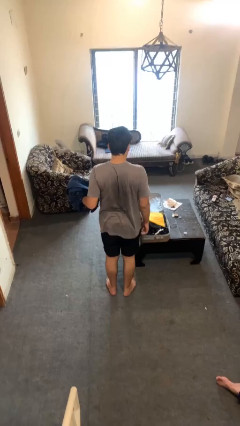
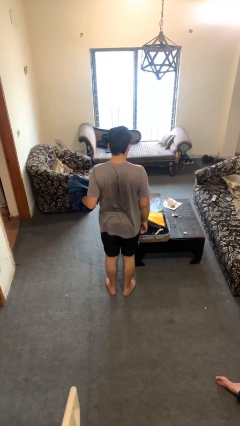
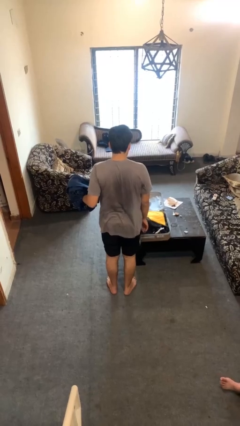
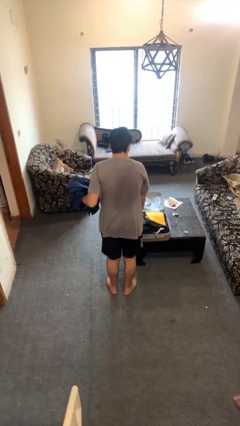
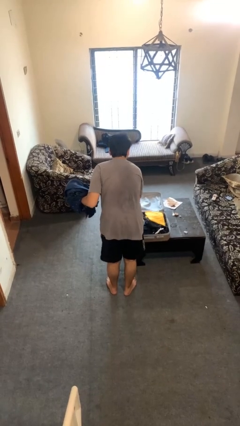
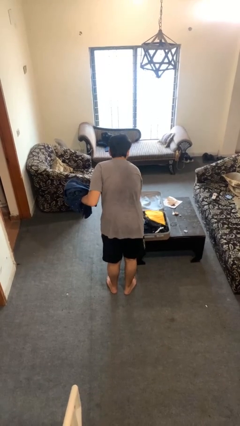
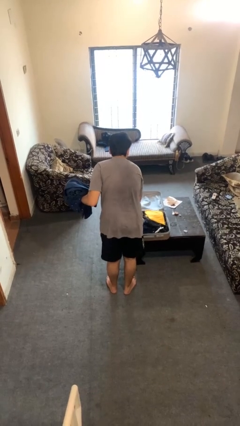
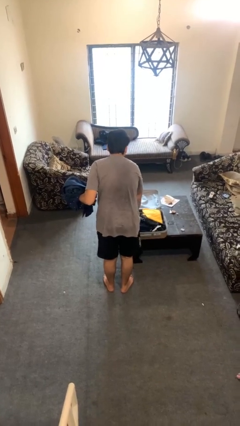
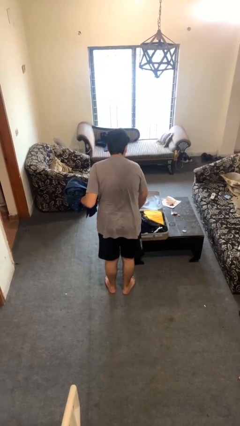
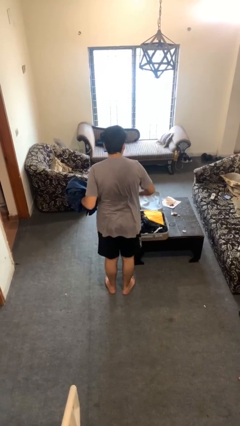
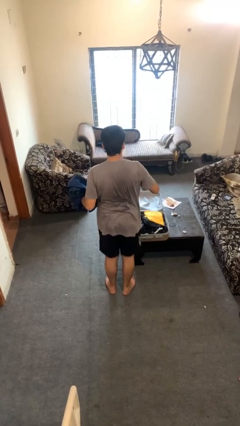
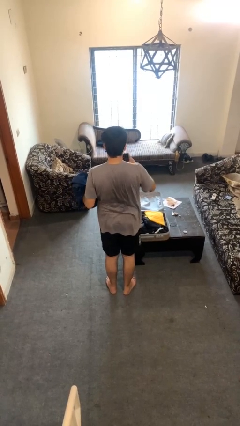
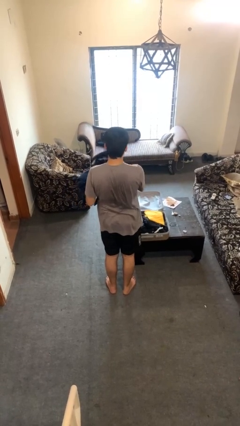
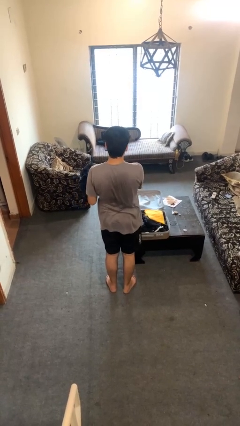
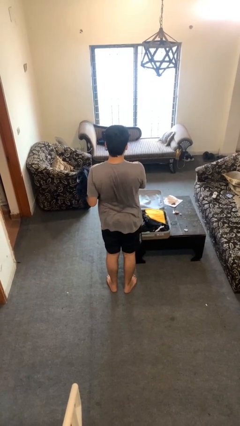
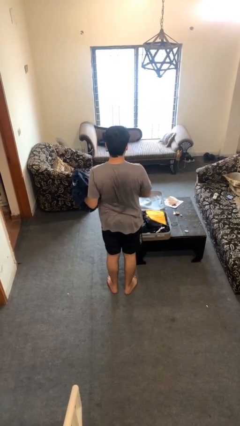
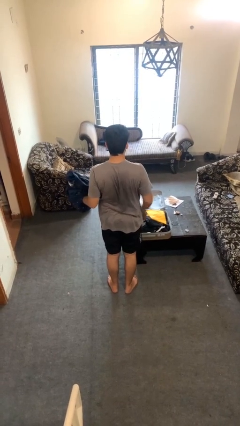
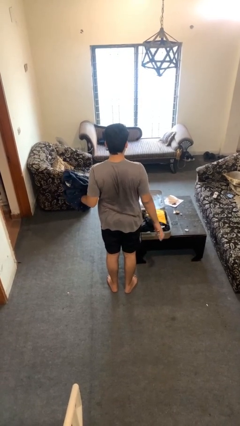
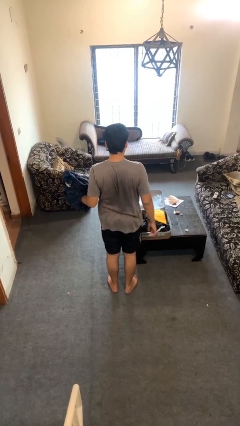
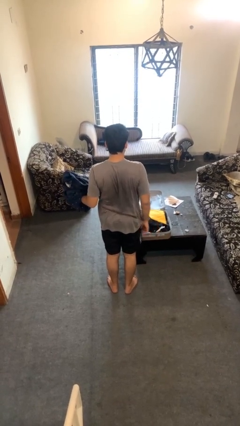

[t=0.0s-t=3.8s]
person unloads clothes from suitcase

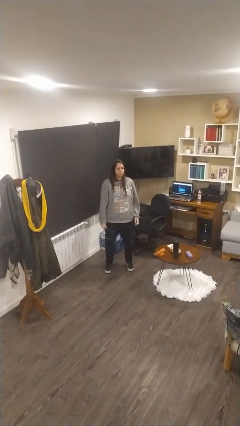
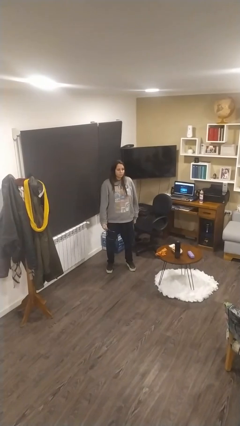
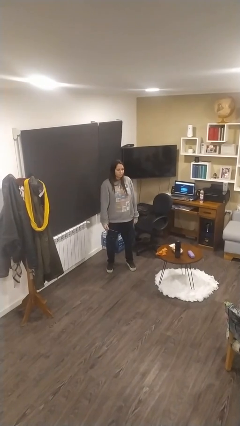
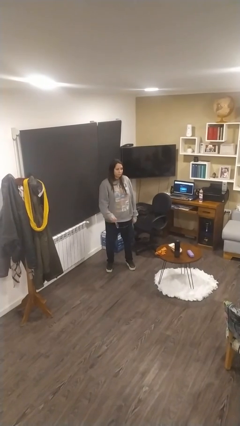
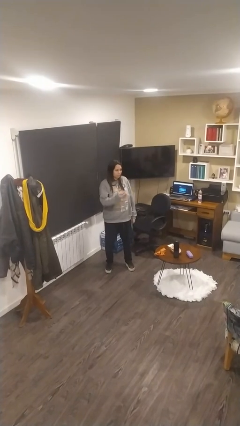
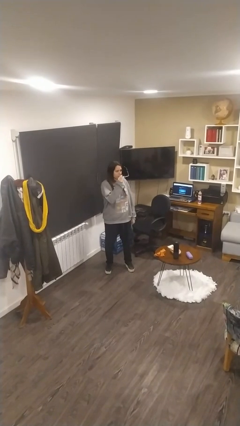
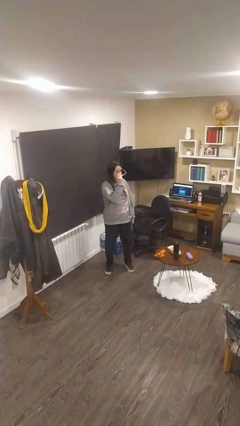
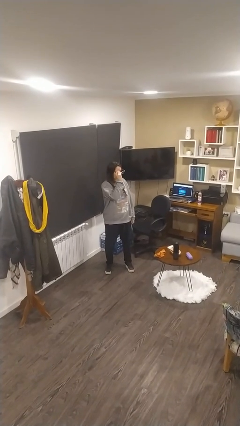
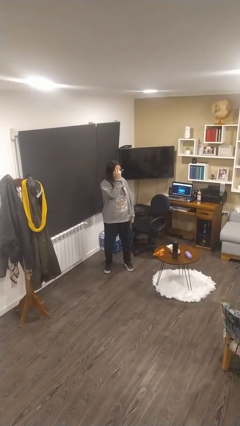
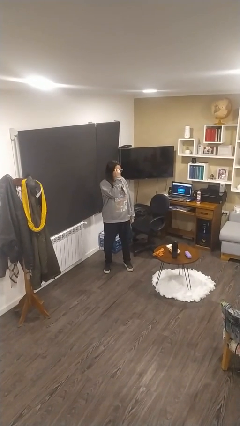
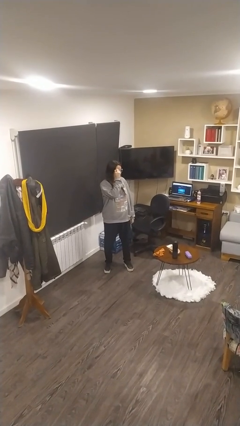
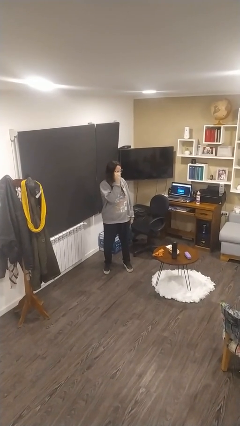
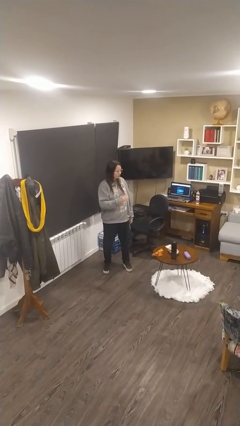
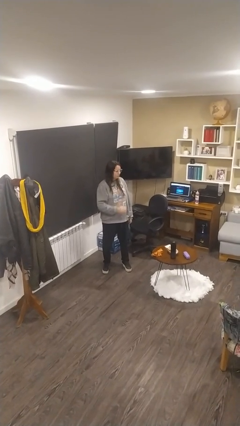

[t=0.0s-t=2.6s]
person puts on glasses

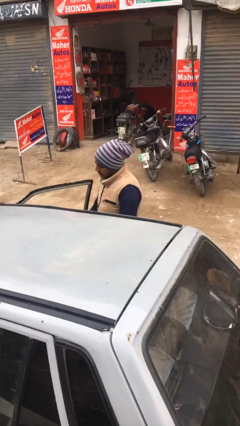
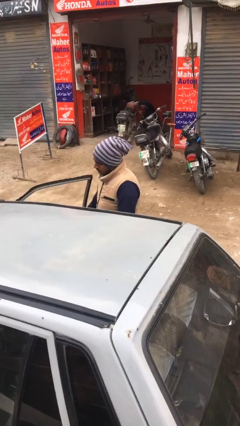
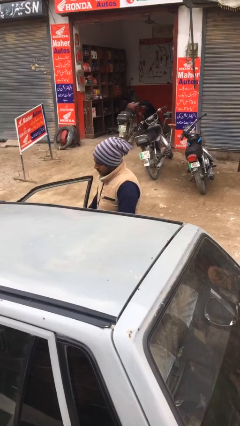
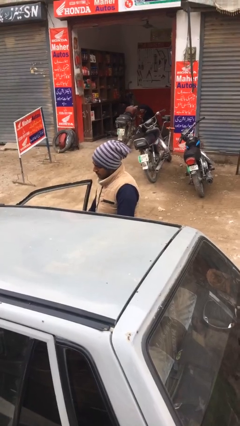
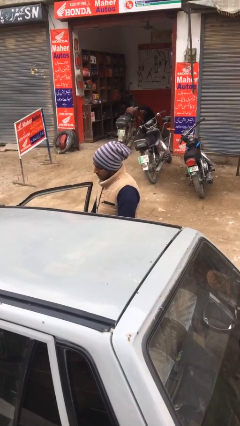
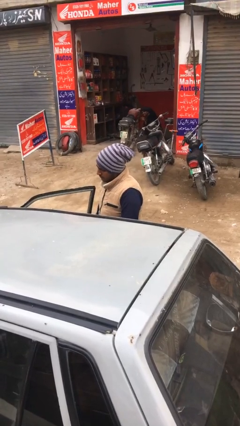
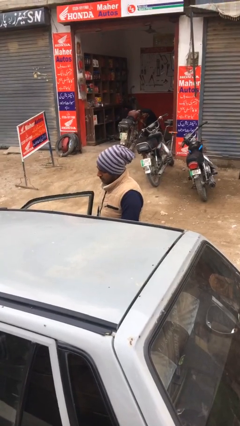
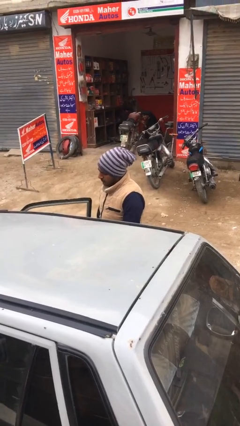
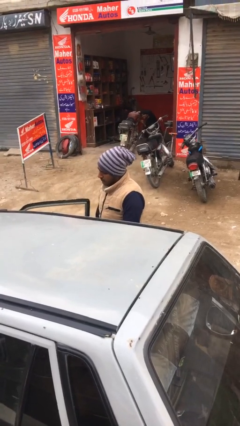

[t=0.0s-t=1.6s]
person opens car door

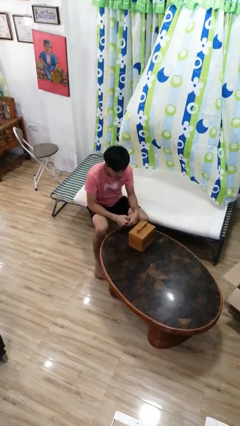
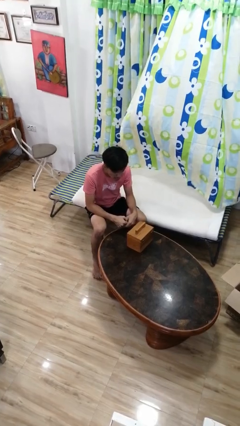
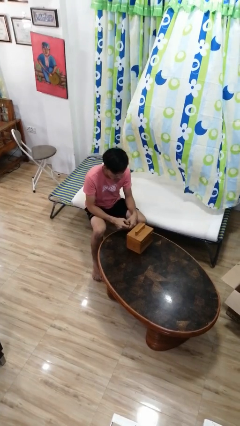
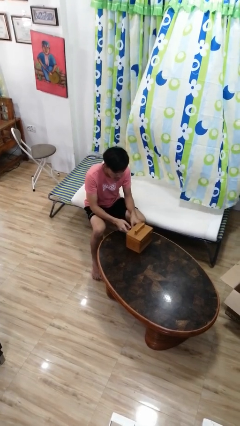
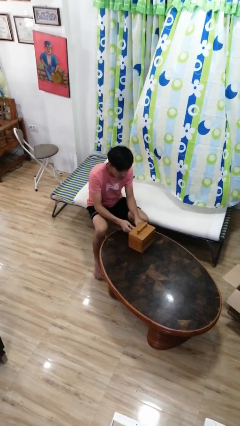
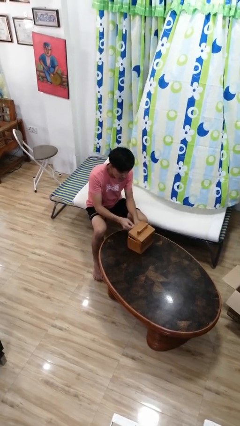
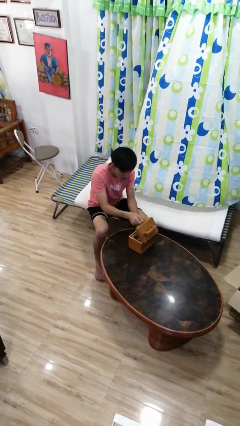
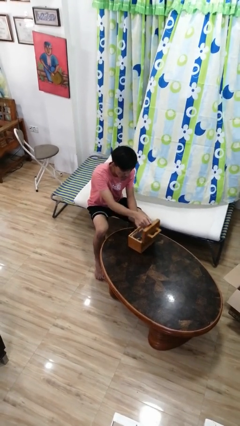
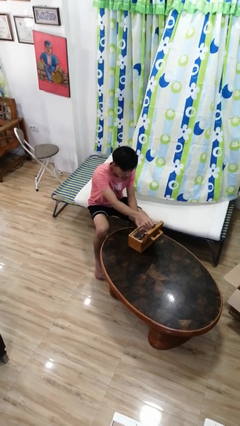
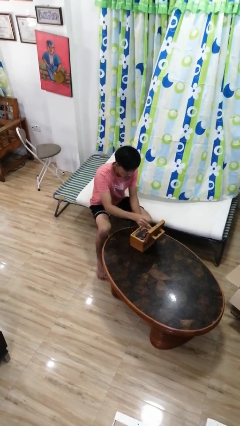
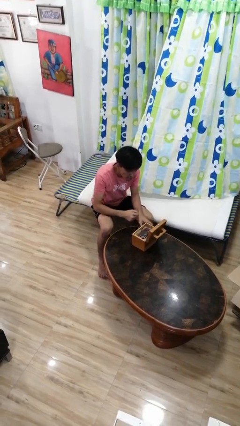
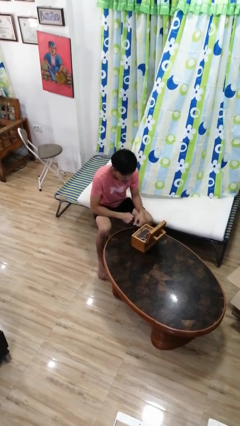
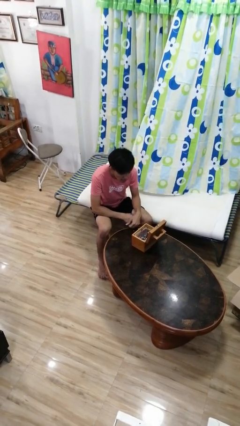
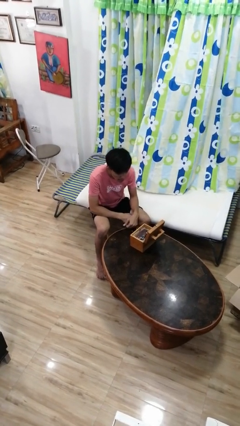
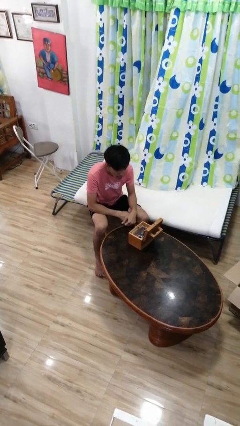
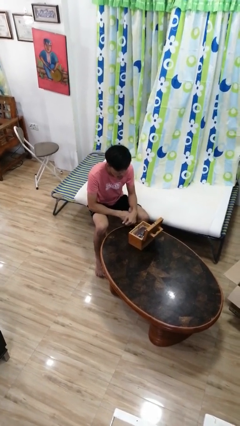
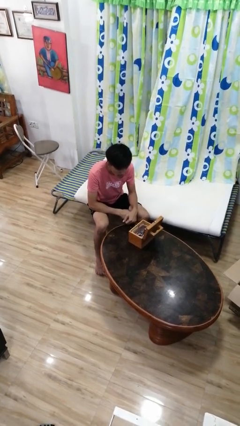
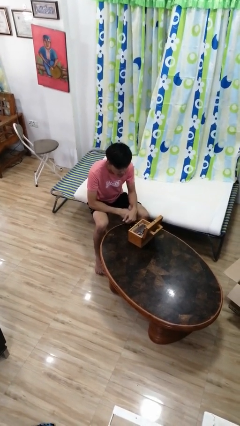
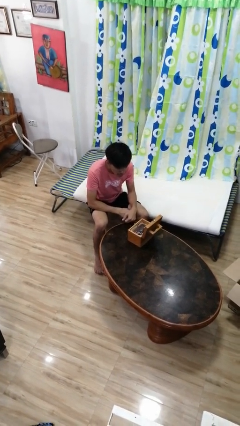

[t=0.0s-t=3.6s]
person opens jewelry box

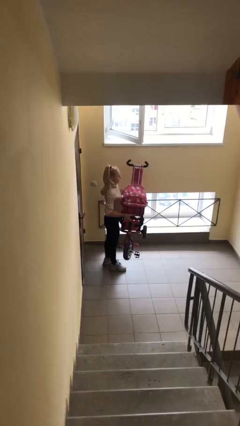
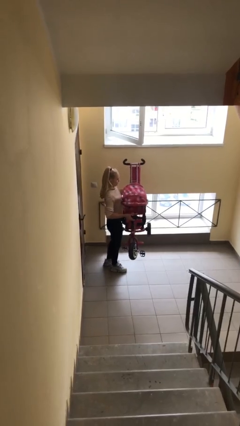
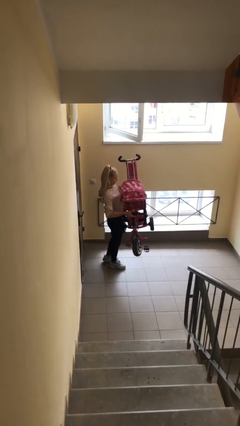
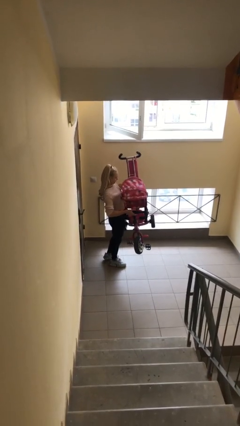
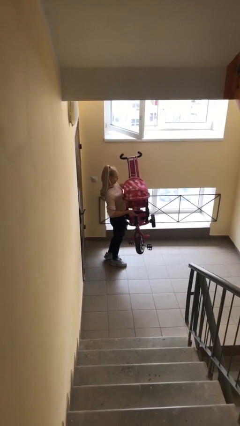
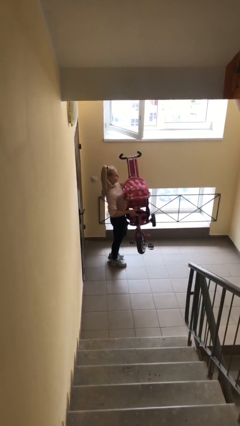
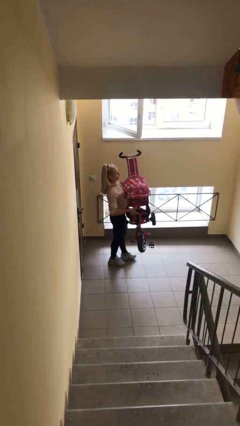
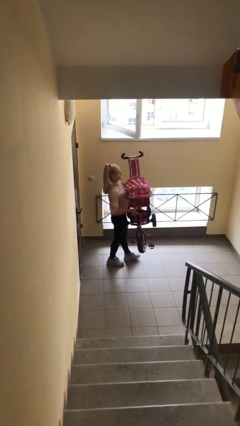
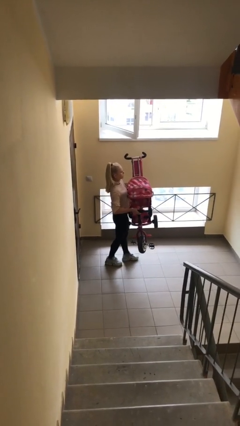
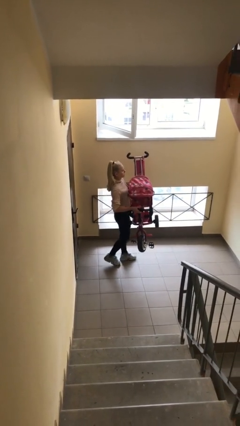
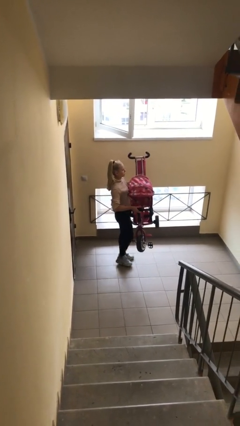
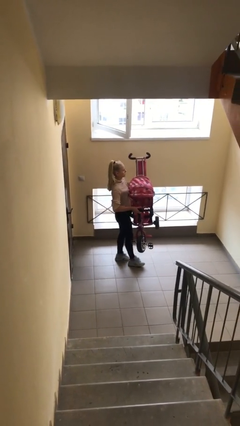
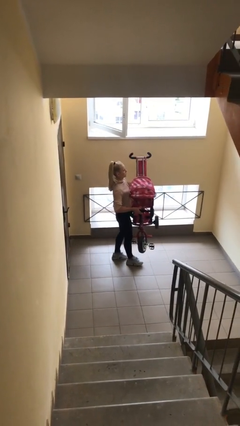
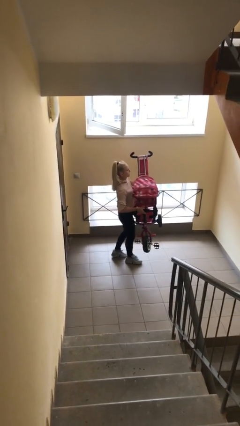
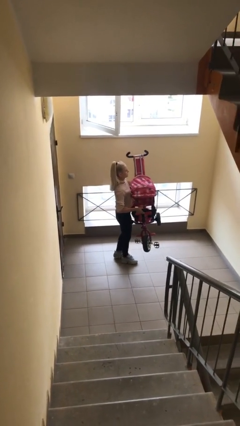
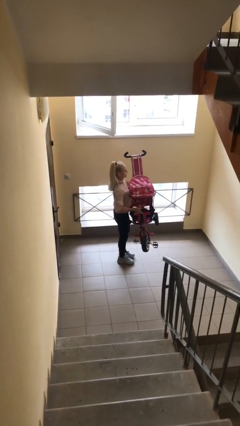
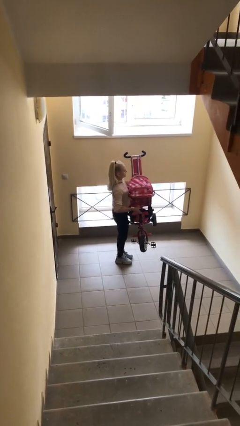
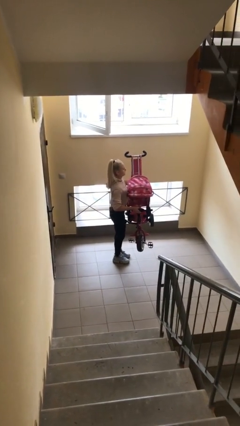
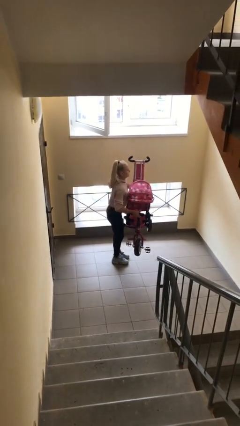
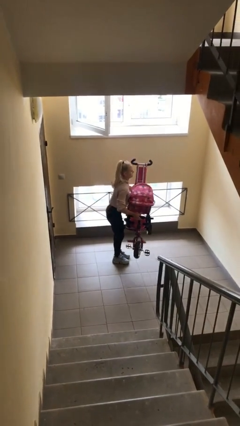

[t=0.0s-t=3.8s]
person carries heavy object

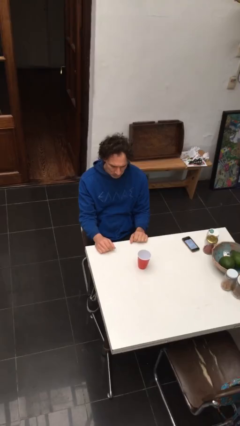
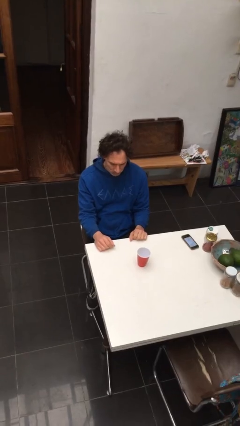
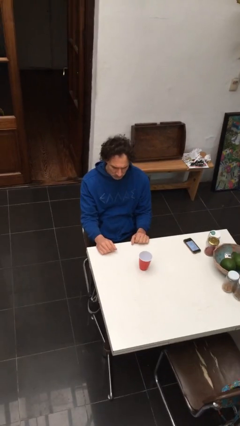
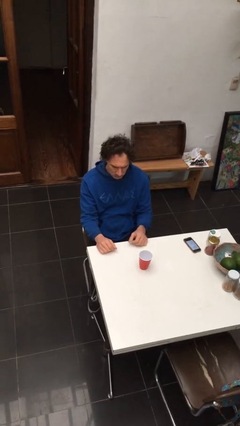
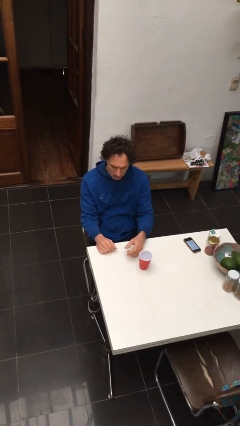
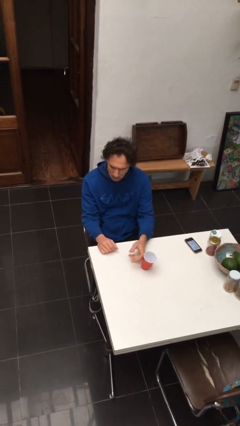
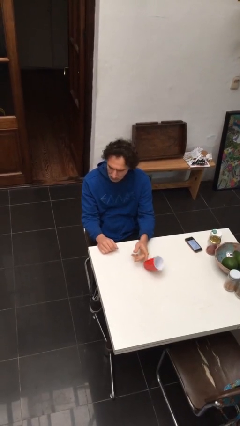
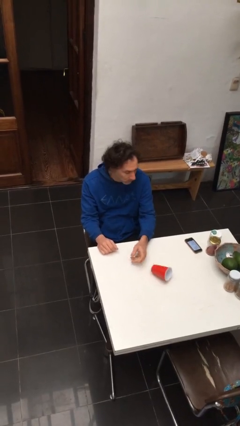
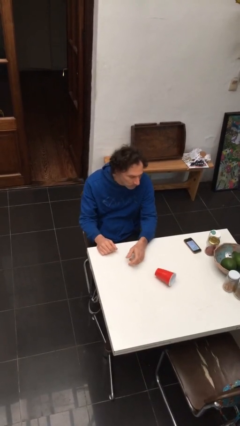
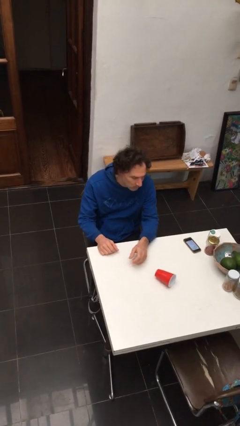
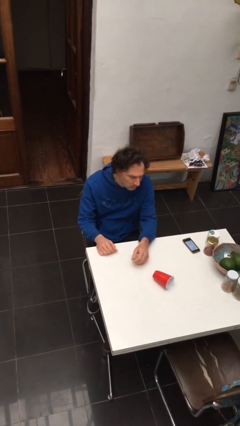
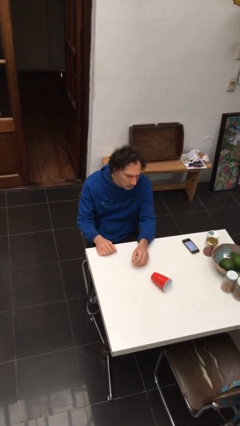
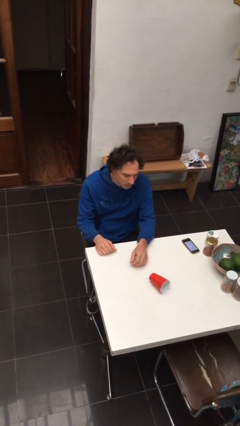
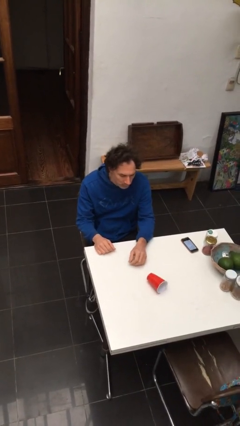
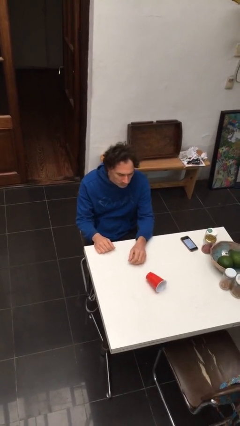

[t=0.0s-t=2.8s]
person knocks over glass
